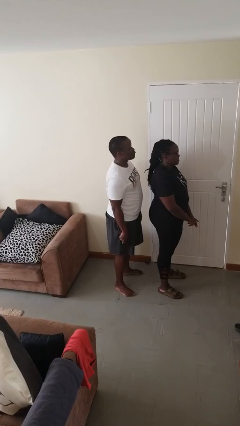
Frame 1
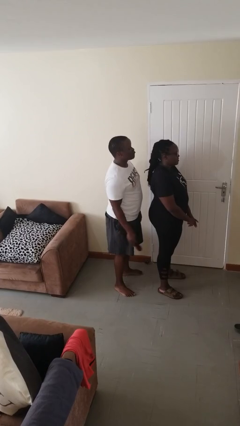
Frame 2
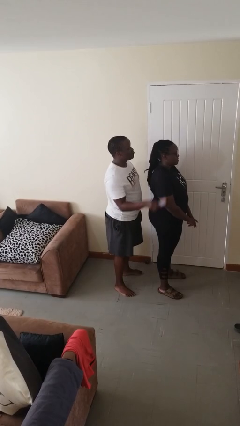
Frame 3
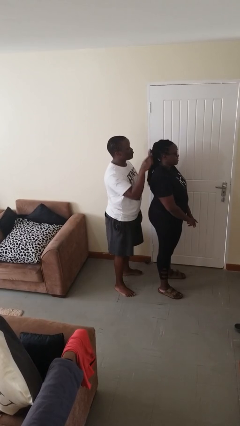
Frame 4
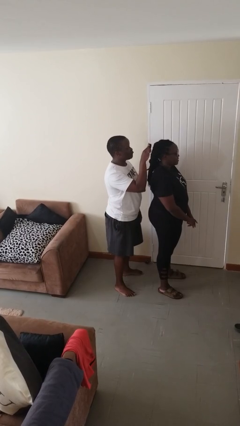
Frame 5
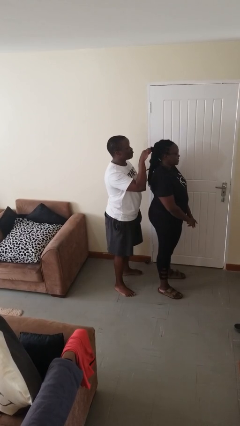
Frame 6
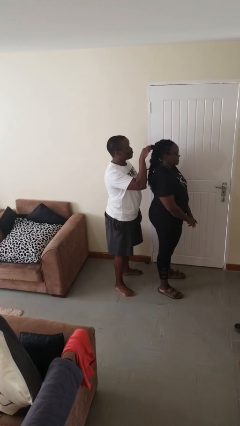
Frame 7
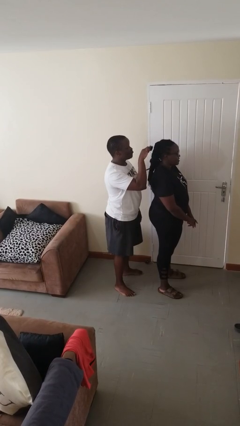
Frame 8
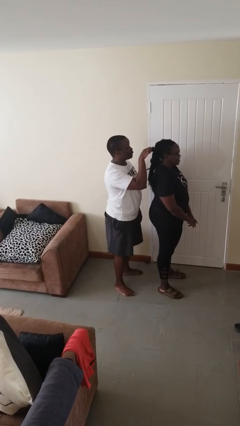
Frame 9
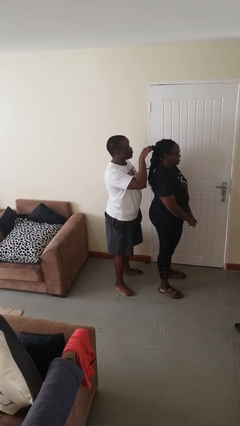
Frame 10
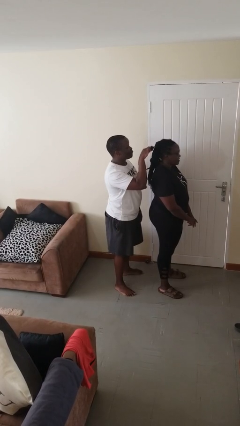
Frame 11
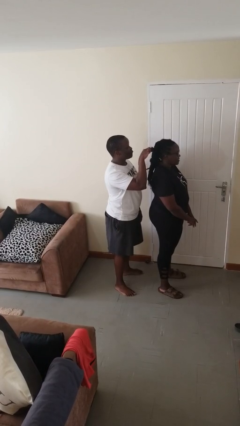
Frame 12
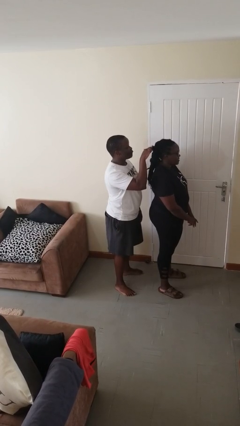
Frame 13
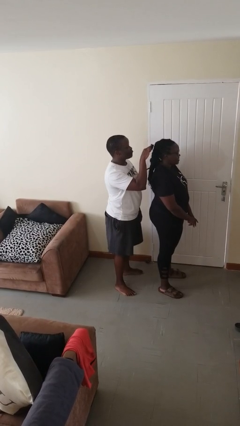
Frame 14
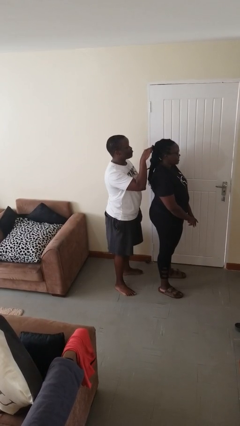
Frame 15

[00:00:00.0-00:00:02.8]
person brushes hair of person

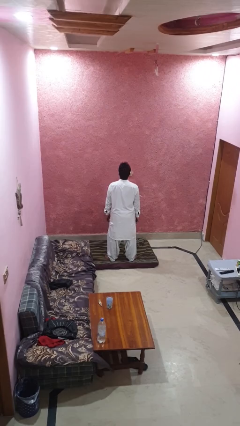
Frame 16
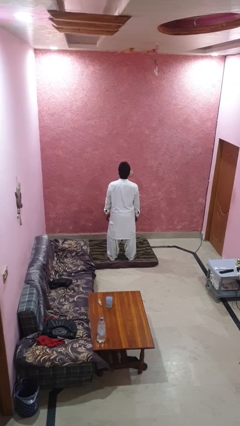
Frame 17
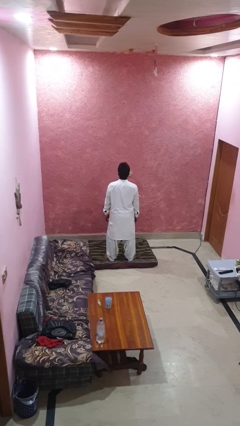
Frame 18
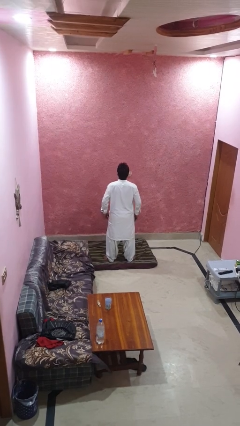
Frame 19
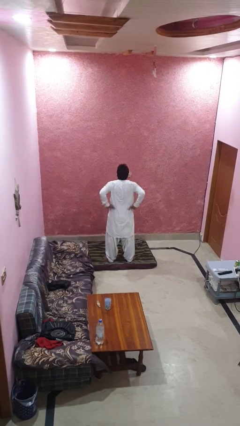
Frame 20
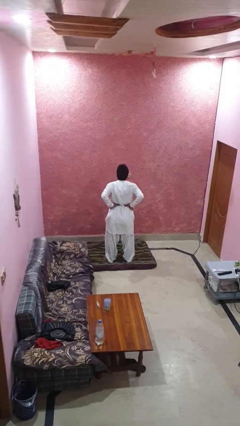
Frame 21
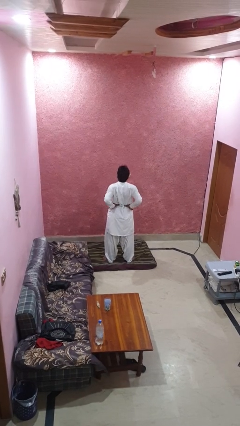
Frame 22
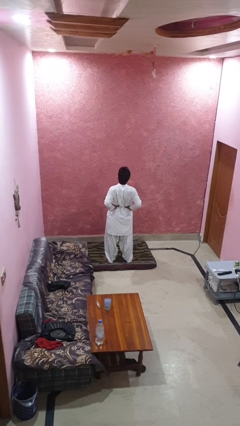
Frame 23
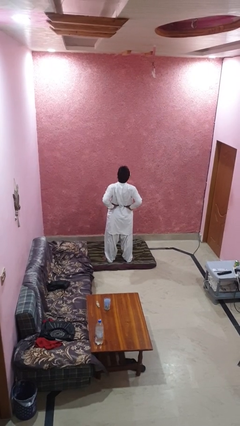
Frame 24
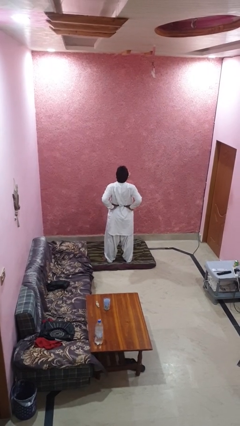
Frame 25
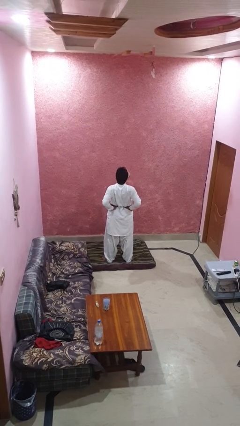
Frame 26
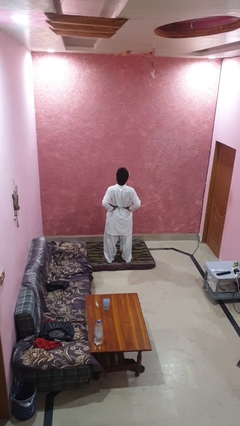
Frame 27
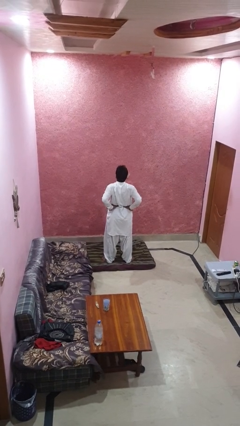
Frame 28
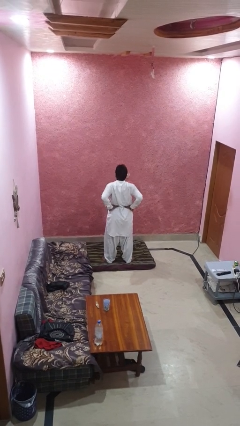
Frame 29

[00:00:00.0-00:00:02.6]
person stretches back

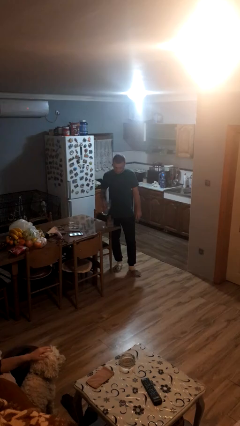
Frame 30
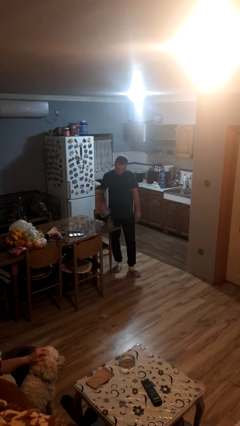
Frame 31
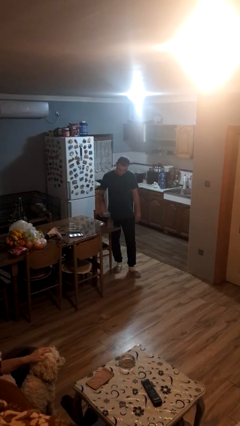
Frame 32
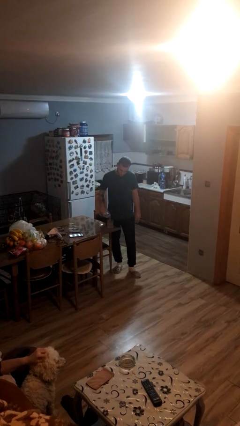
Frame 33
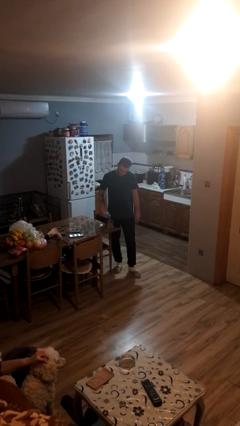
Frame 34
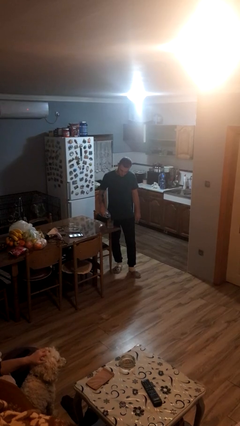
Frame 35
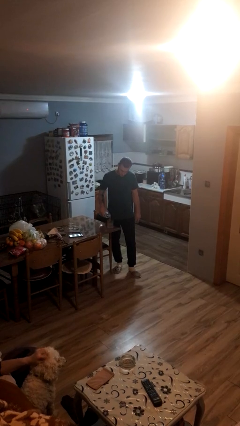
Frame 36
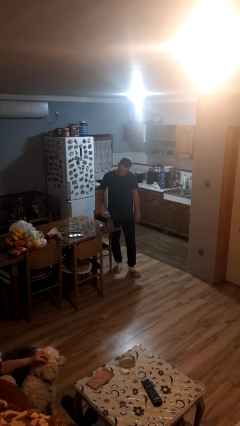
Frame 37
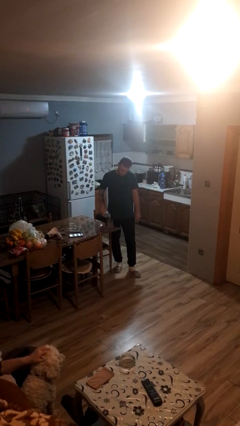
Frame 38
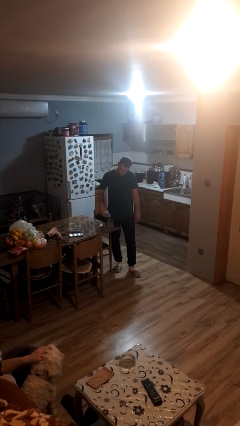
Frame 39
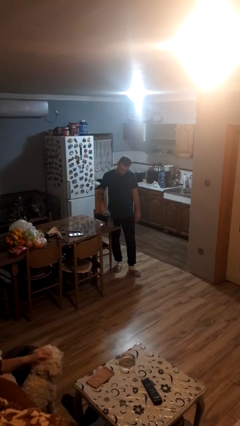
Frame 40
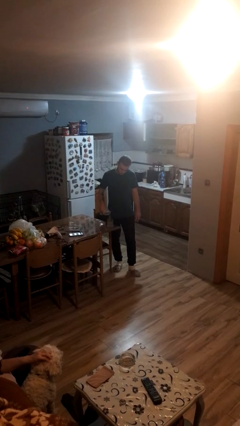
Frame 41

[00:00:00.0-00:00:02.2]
person pours liquid into cup

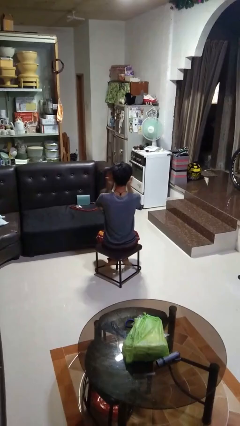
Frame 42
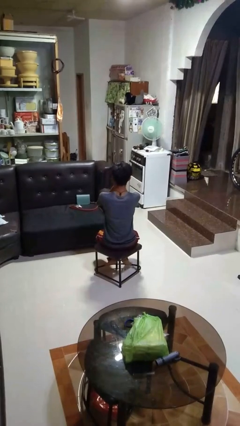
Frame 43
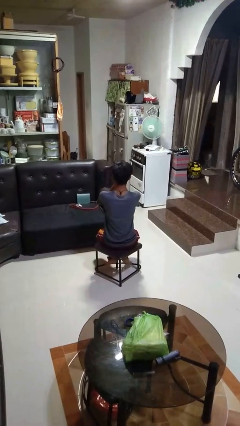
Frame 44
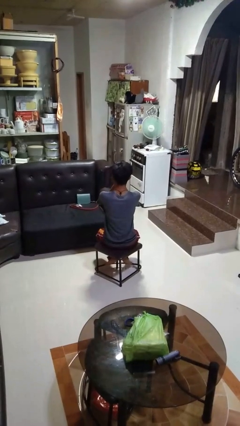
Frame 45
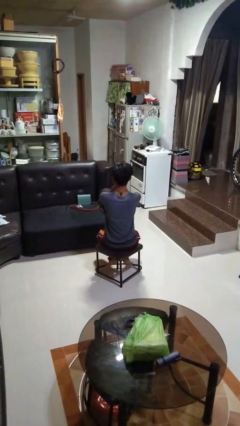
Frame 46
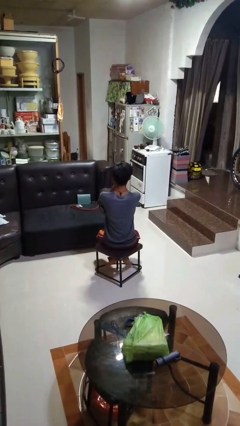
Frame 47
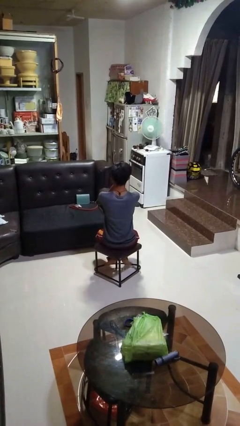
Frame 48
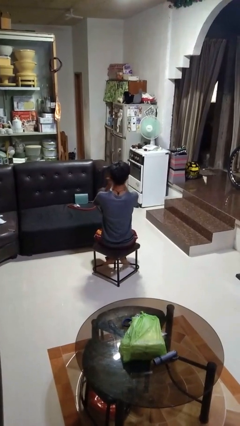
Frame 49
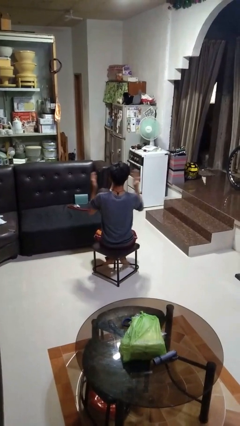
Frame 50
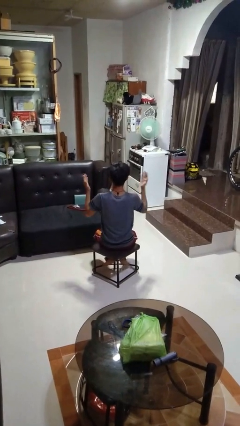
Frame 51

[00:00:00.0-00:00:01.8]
person covers face with hands

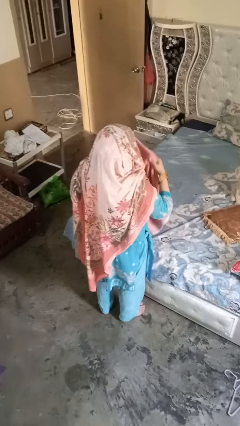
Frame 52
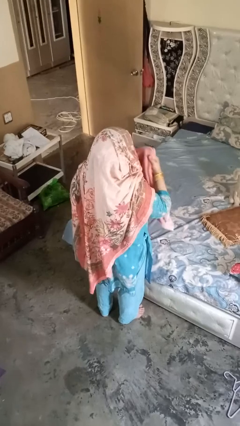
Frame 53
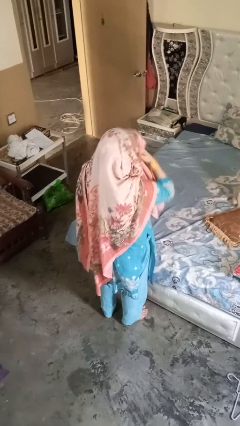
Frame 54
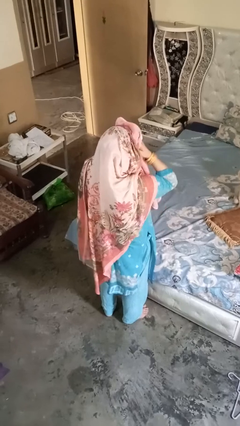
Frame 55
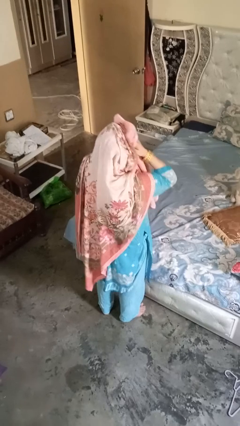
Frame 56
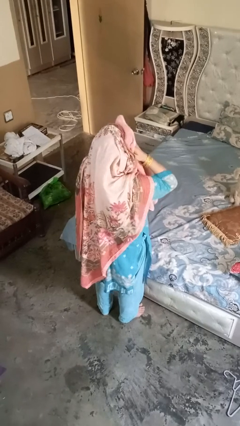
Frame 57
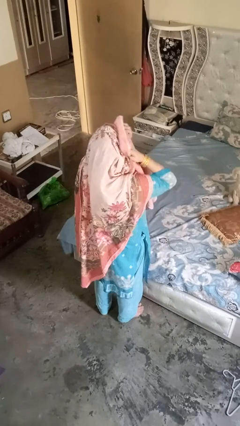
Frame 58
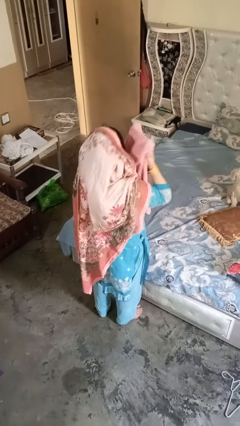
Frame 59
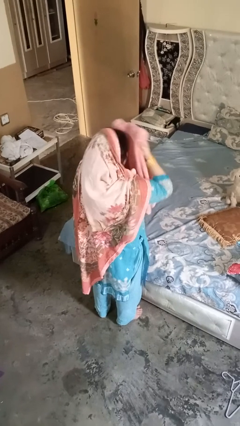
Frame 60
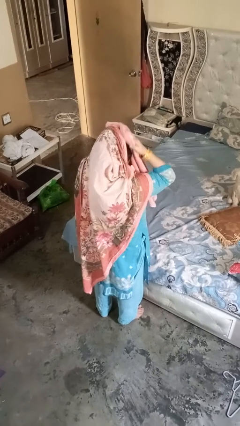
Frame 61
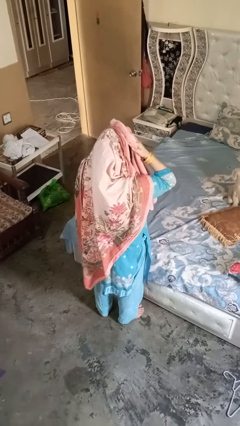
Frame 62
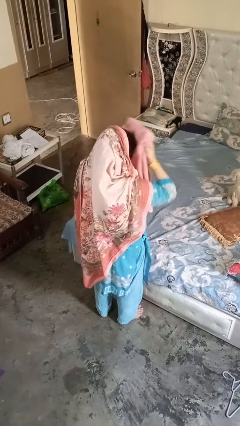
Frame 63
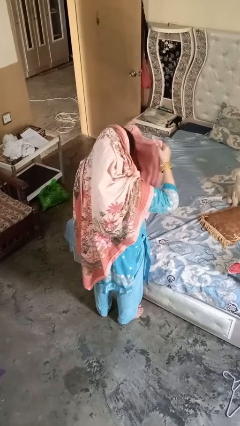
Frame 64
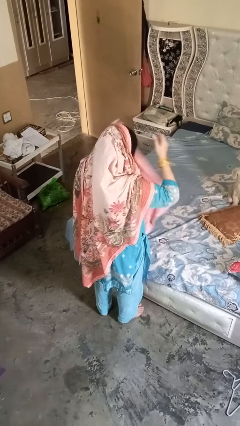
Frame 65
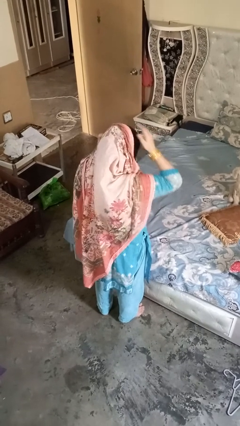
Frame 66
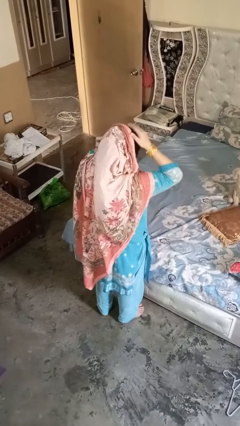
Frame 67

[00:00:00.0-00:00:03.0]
person dries hair with towel

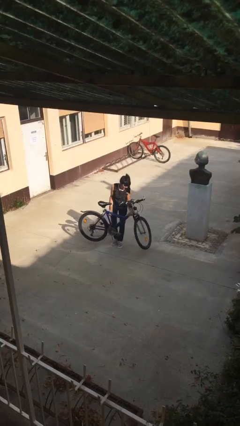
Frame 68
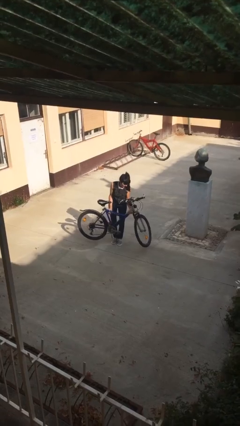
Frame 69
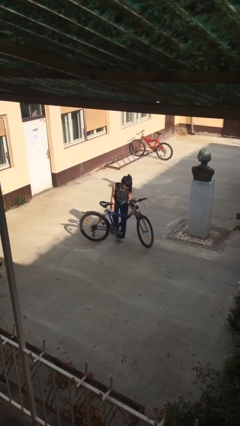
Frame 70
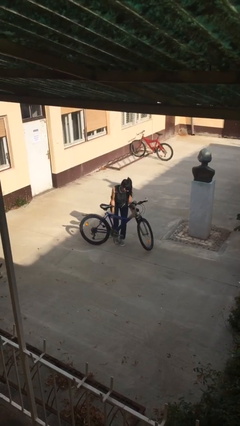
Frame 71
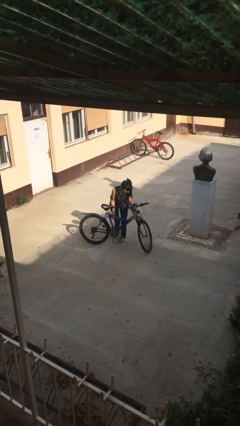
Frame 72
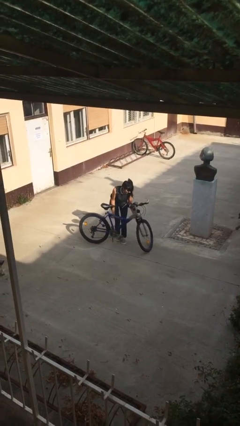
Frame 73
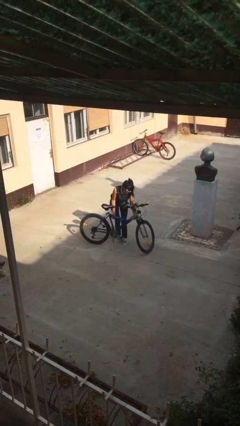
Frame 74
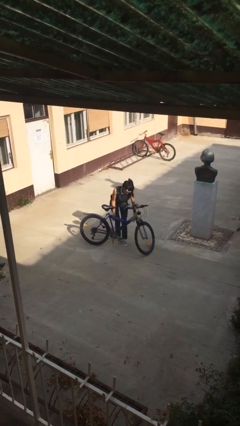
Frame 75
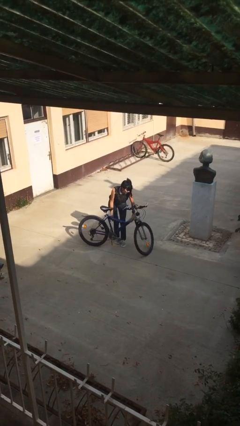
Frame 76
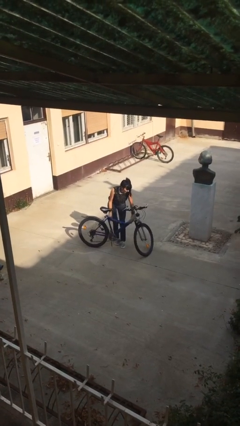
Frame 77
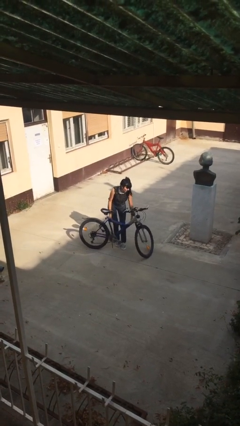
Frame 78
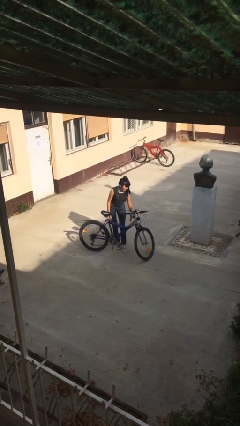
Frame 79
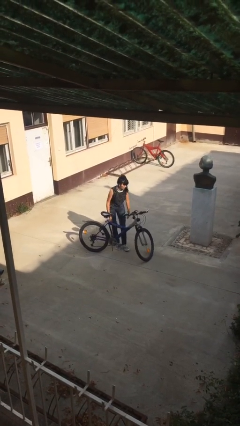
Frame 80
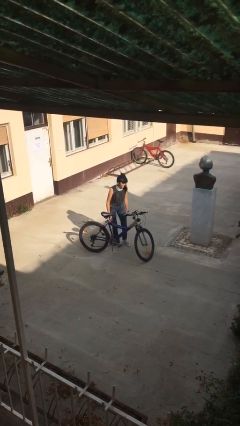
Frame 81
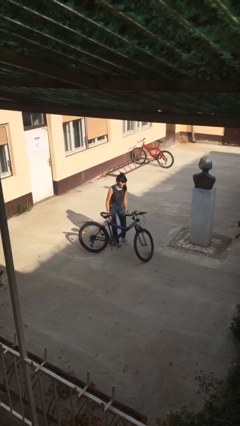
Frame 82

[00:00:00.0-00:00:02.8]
person puts down object on floor

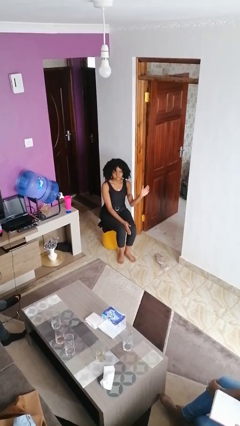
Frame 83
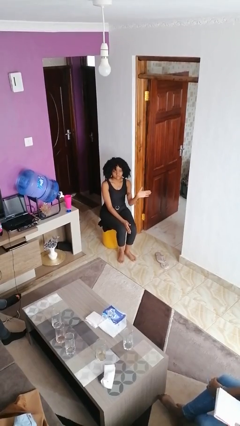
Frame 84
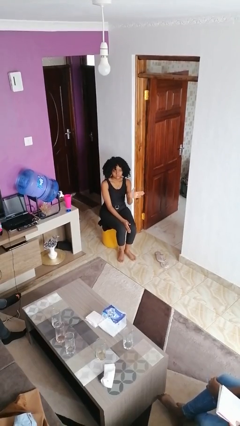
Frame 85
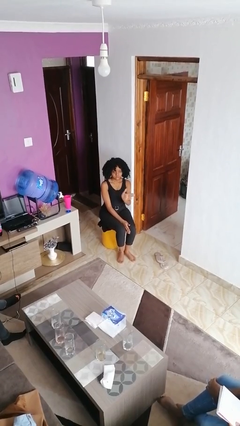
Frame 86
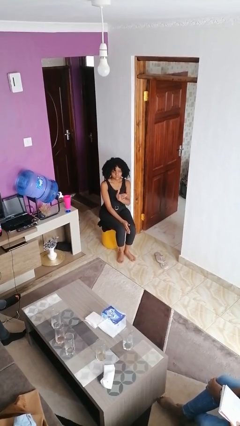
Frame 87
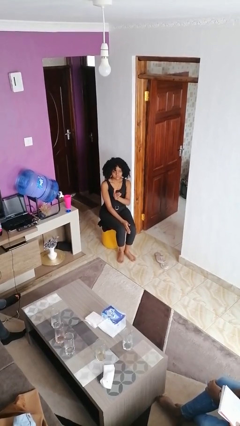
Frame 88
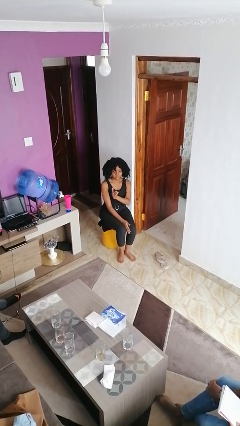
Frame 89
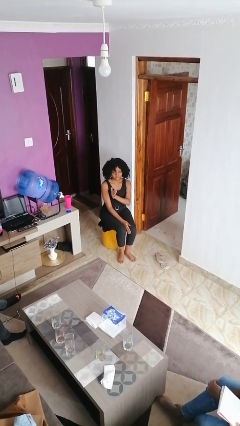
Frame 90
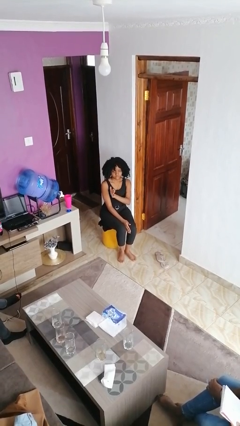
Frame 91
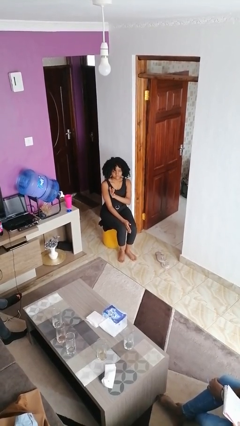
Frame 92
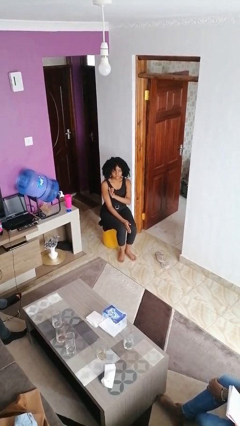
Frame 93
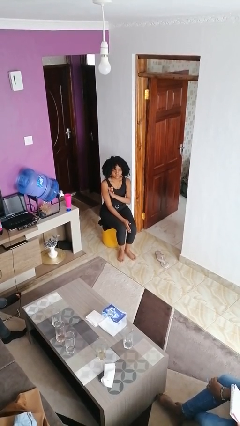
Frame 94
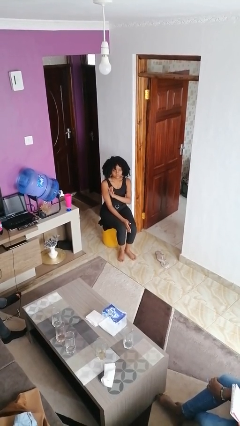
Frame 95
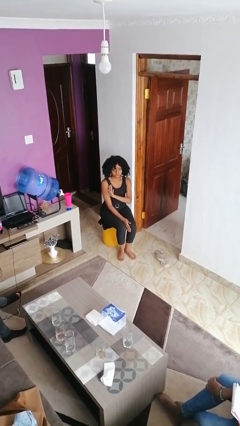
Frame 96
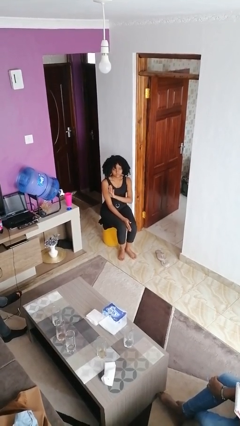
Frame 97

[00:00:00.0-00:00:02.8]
person gestures swipe right
